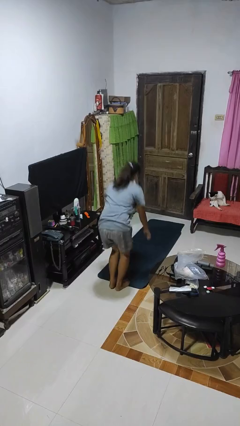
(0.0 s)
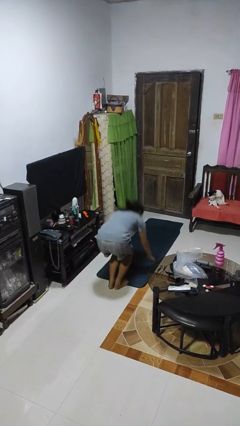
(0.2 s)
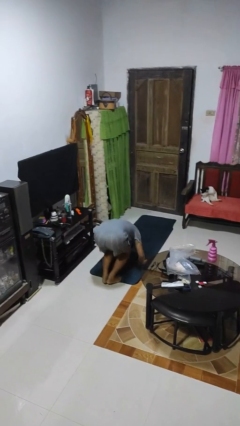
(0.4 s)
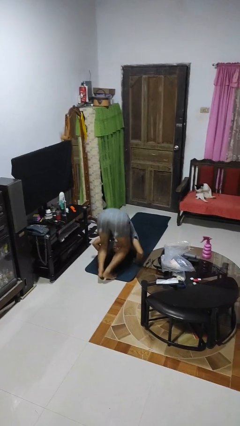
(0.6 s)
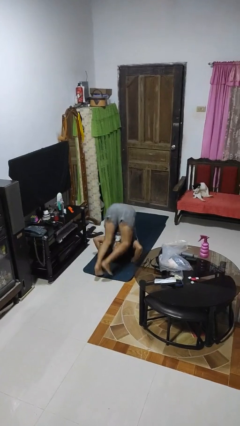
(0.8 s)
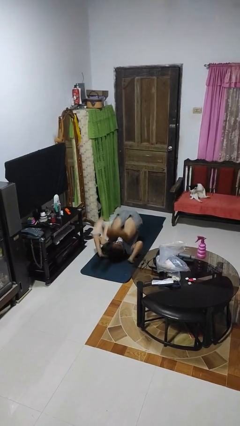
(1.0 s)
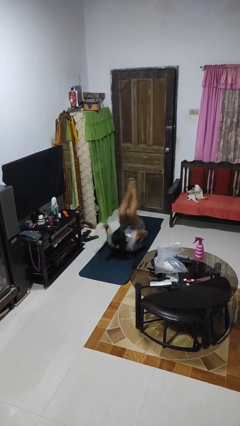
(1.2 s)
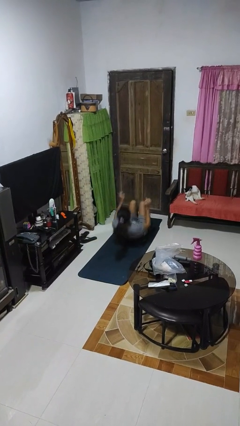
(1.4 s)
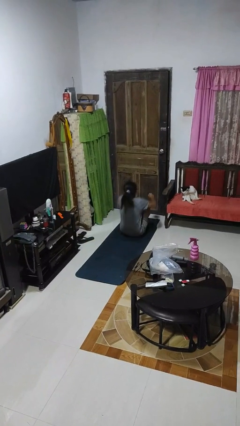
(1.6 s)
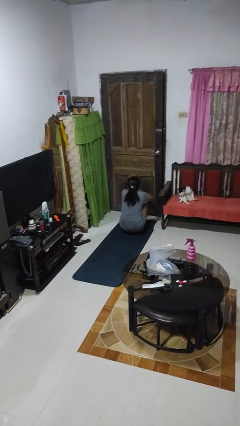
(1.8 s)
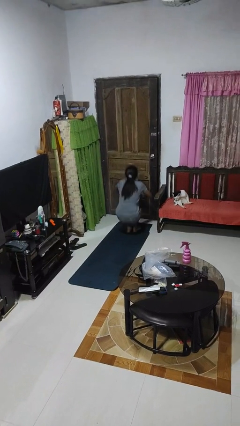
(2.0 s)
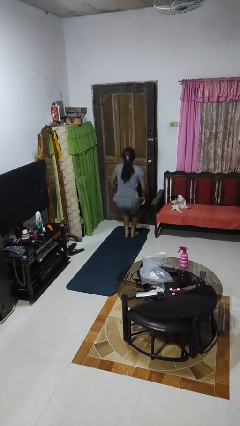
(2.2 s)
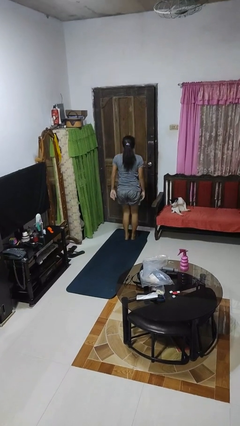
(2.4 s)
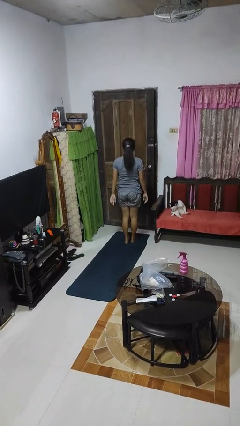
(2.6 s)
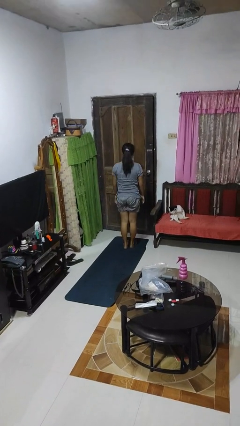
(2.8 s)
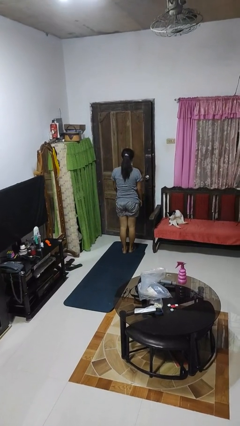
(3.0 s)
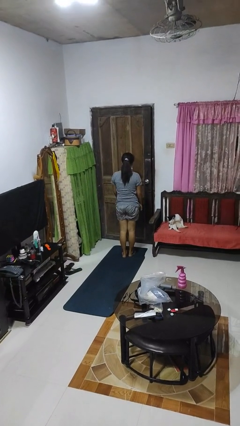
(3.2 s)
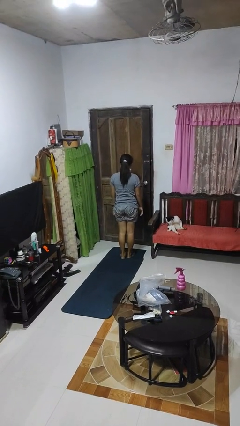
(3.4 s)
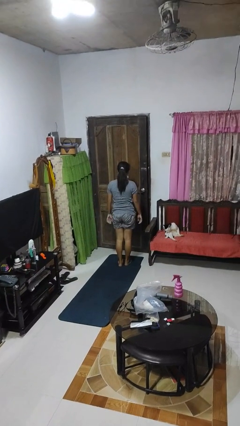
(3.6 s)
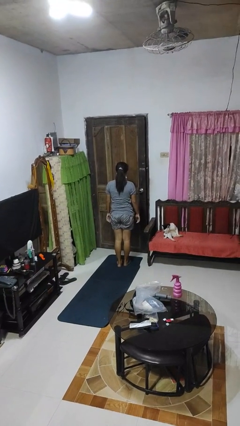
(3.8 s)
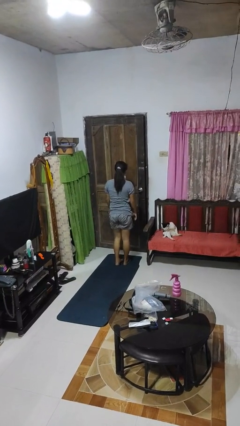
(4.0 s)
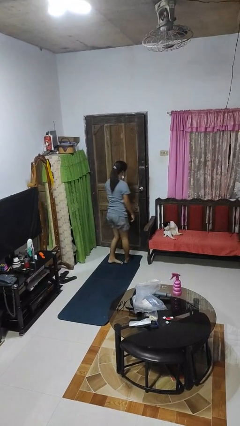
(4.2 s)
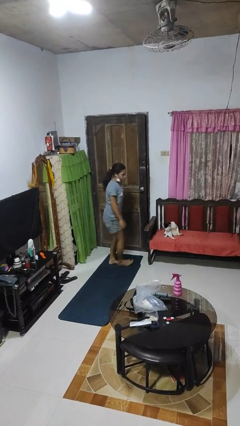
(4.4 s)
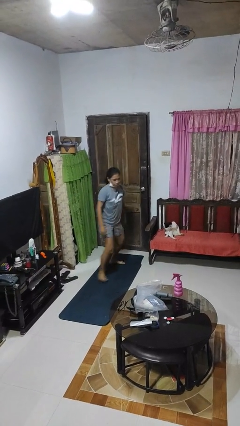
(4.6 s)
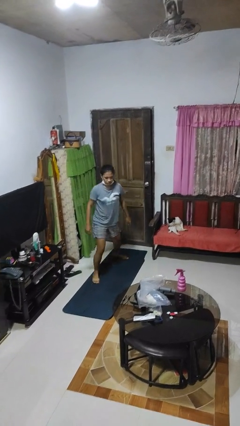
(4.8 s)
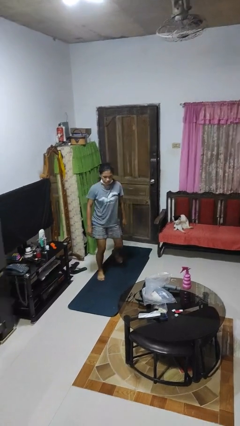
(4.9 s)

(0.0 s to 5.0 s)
person somersaults

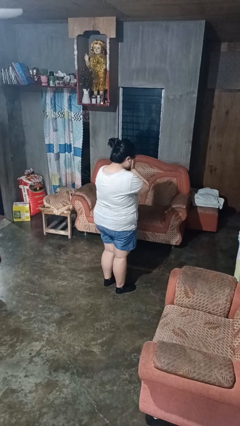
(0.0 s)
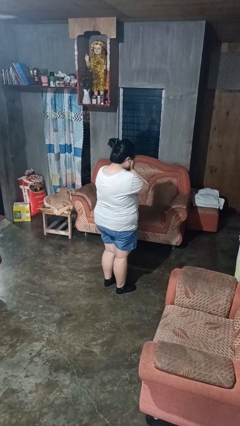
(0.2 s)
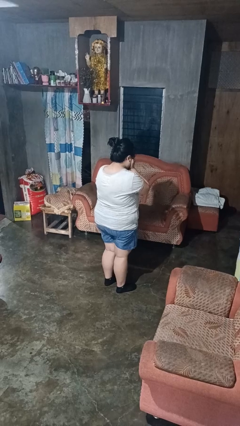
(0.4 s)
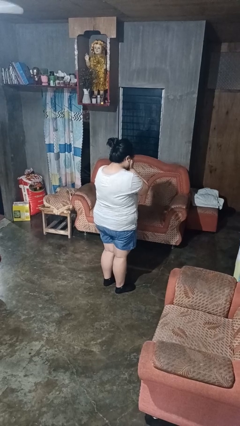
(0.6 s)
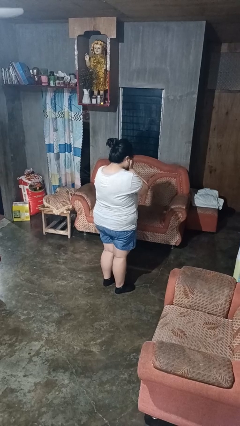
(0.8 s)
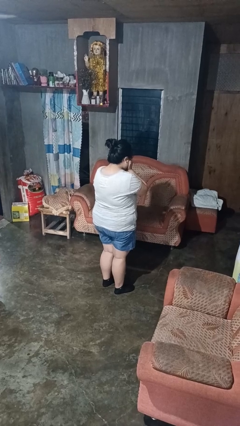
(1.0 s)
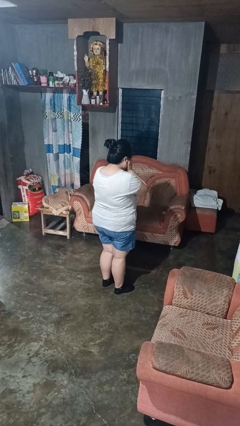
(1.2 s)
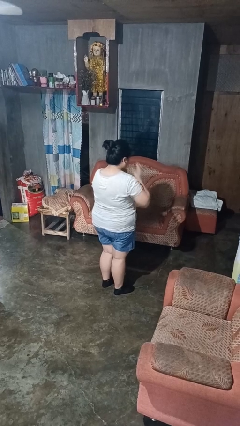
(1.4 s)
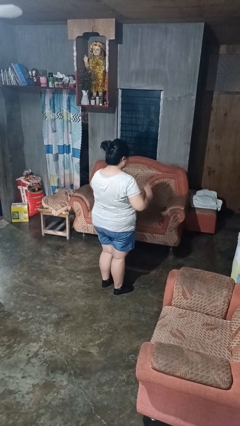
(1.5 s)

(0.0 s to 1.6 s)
person covers face with hands

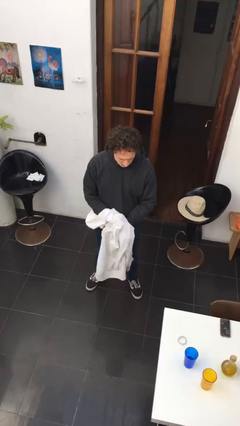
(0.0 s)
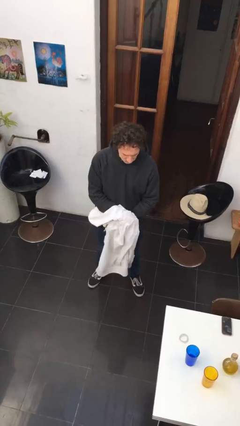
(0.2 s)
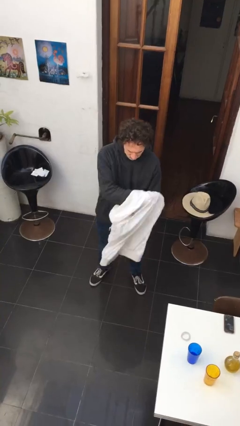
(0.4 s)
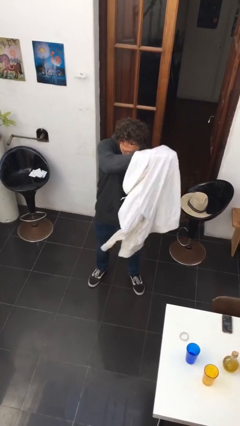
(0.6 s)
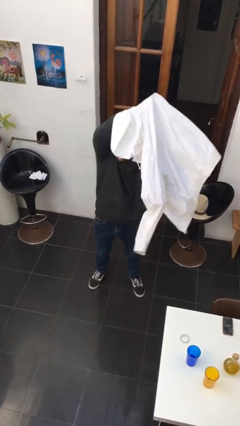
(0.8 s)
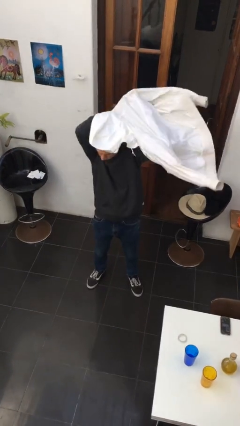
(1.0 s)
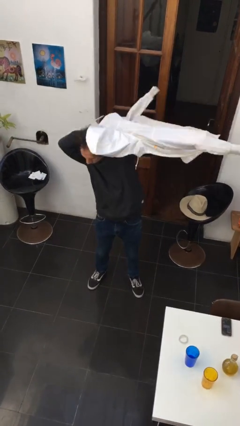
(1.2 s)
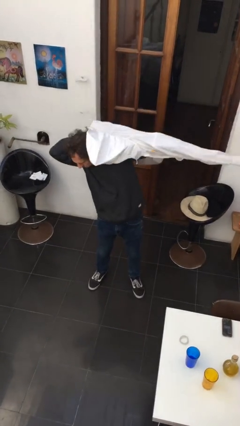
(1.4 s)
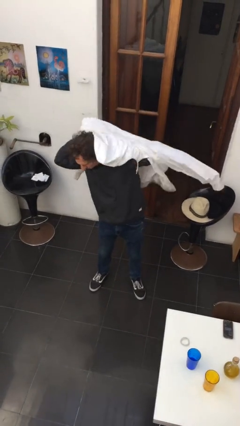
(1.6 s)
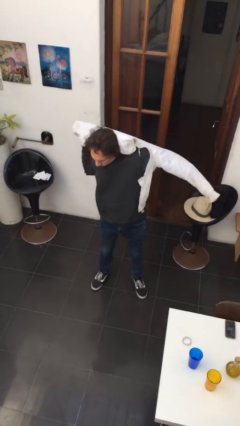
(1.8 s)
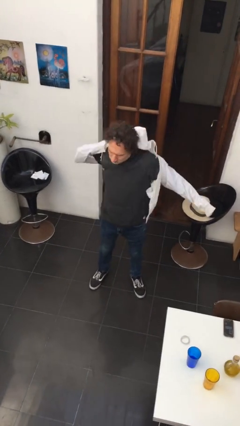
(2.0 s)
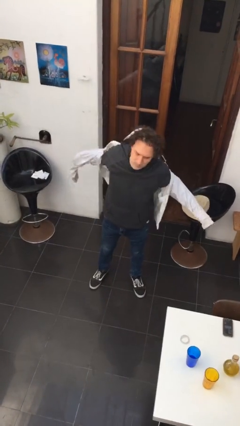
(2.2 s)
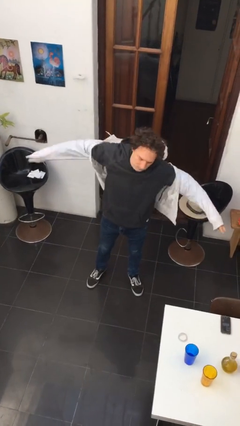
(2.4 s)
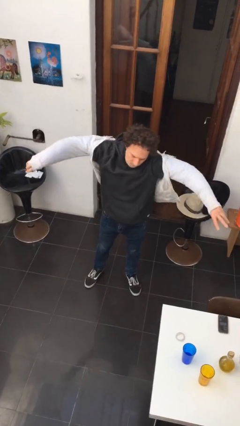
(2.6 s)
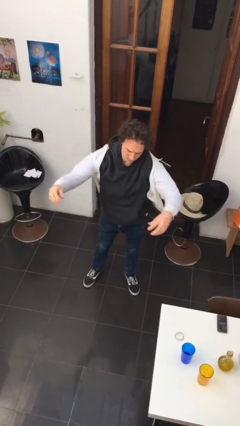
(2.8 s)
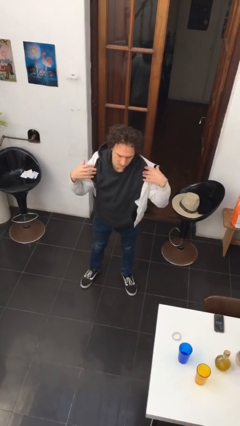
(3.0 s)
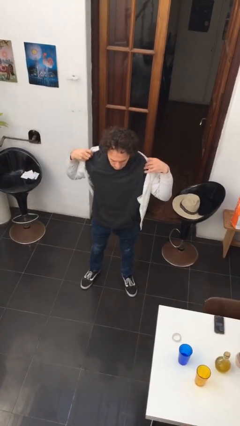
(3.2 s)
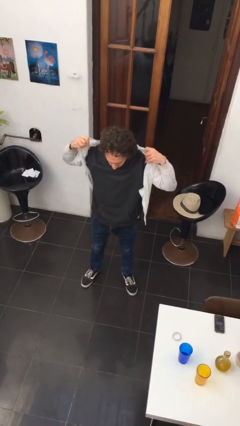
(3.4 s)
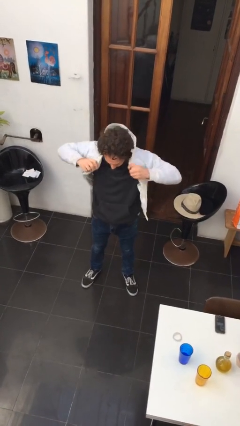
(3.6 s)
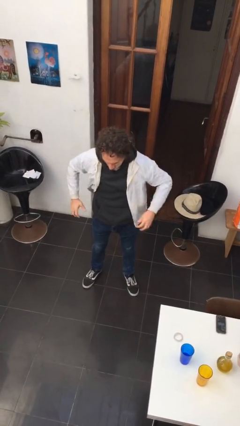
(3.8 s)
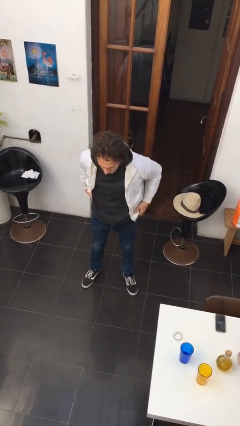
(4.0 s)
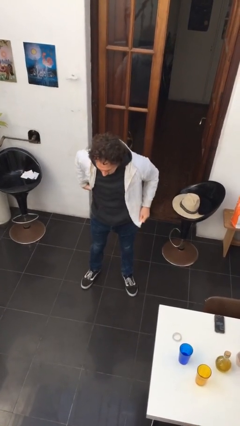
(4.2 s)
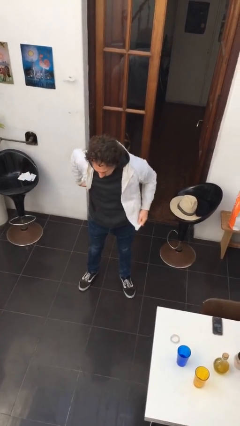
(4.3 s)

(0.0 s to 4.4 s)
person puts on jacket

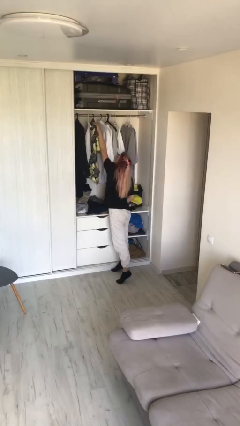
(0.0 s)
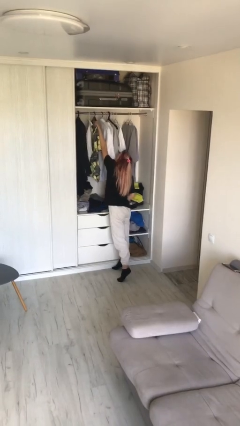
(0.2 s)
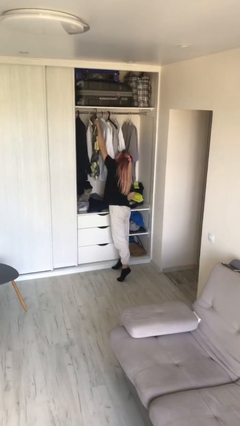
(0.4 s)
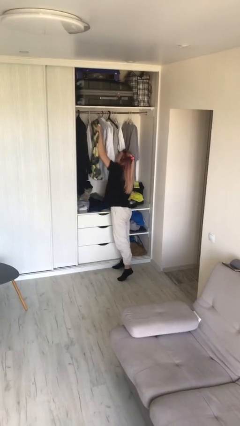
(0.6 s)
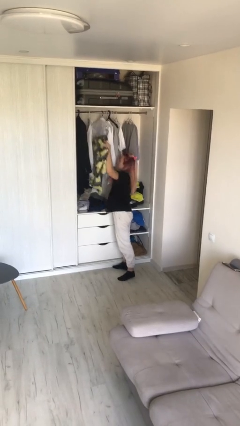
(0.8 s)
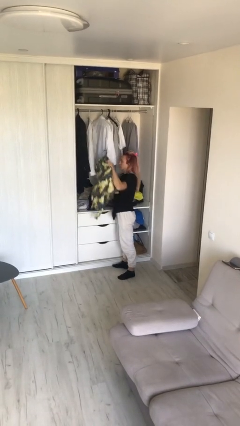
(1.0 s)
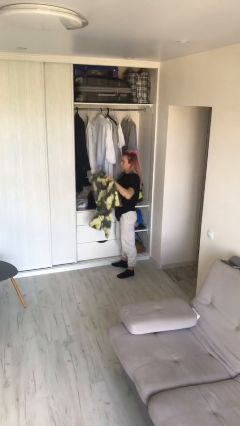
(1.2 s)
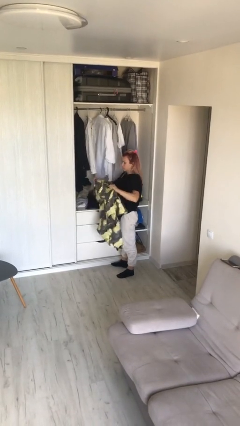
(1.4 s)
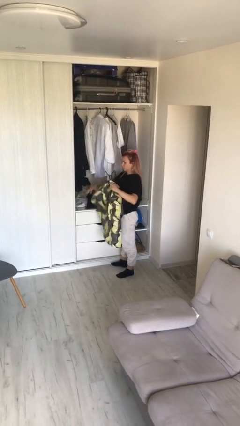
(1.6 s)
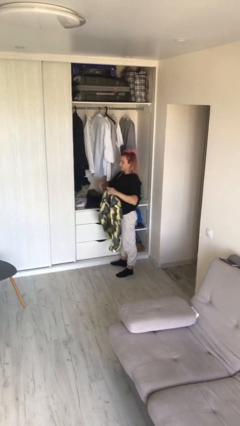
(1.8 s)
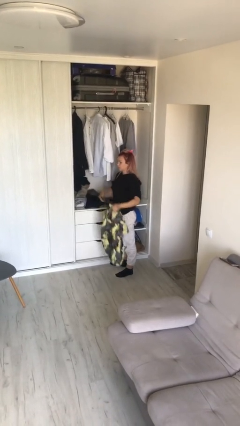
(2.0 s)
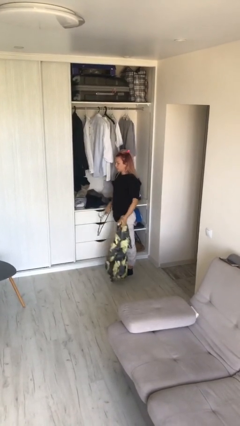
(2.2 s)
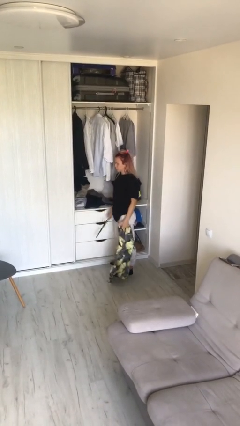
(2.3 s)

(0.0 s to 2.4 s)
person takes clothes from closet

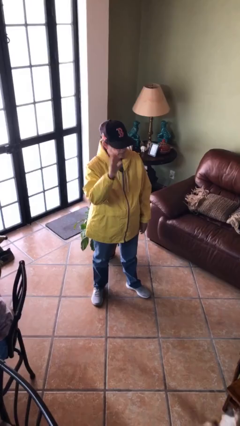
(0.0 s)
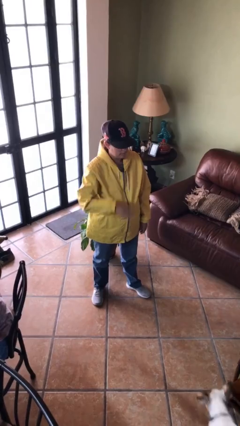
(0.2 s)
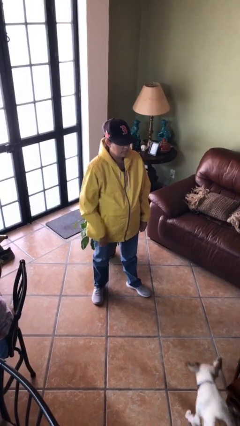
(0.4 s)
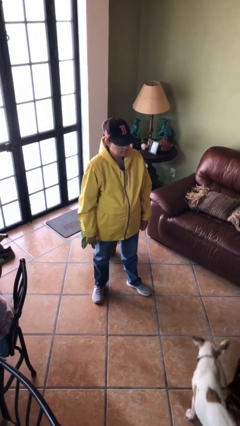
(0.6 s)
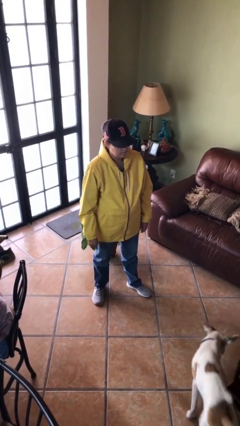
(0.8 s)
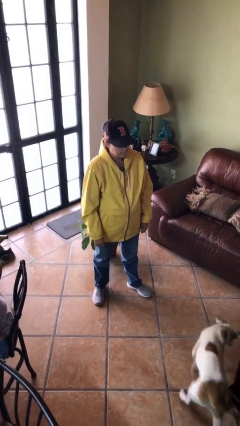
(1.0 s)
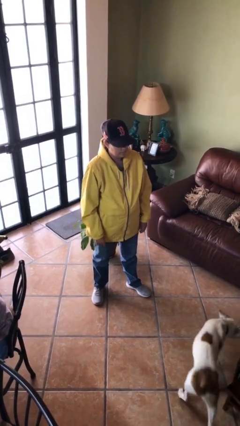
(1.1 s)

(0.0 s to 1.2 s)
person gestures lower hand

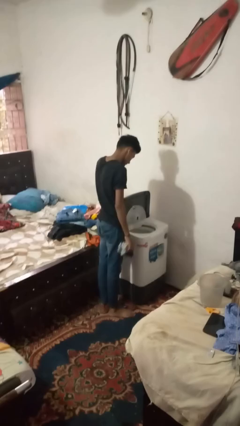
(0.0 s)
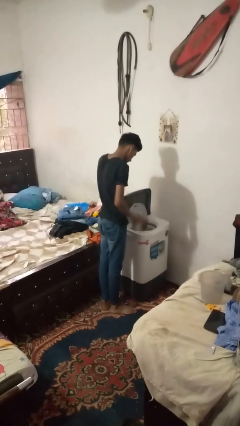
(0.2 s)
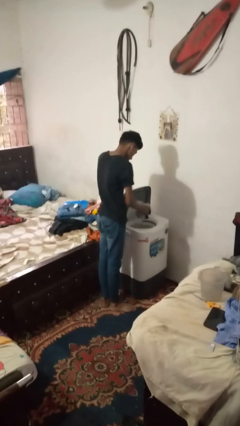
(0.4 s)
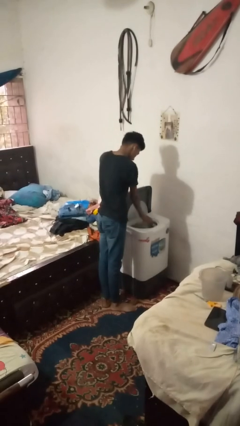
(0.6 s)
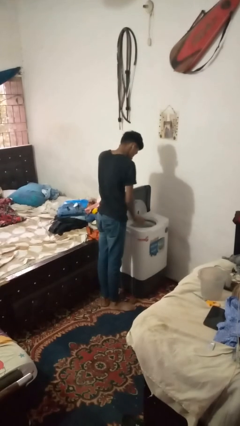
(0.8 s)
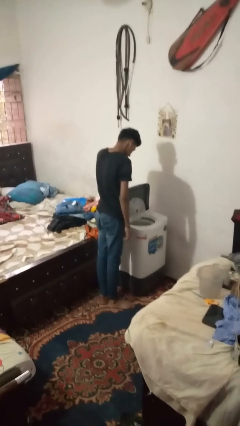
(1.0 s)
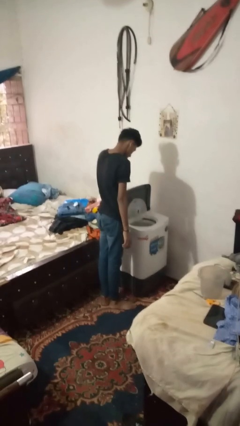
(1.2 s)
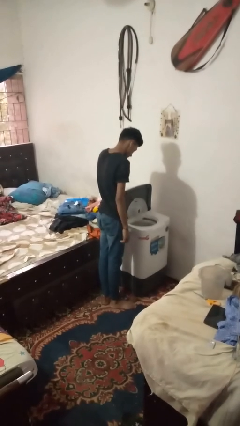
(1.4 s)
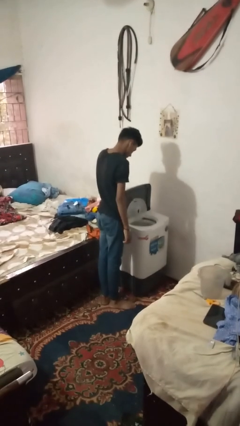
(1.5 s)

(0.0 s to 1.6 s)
person loads dryer

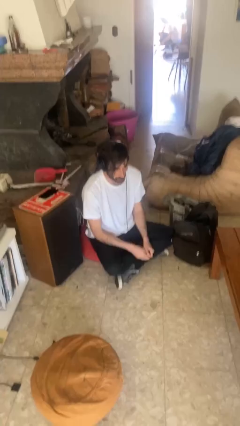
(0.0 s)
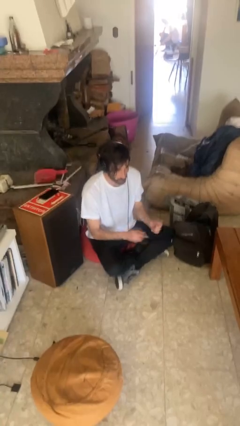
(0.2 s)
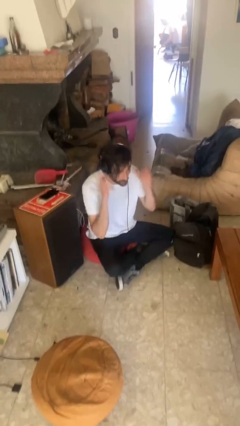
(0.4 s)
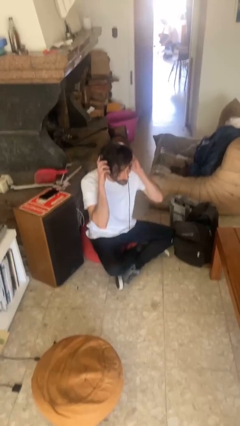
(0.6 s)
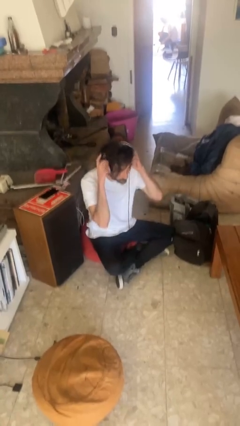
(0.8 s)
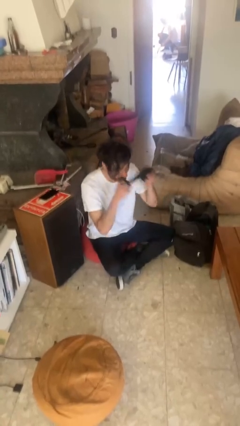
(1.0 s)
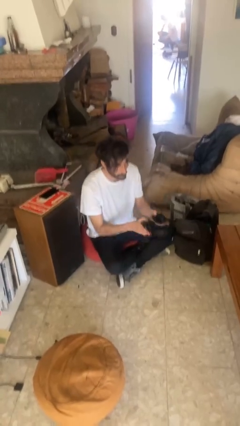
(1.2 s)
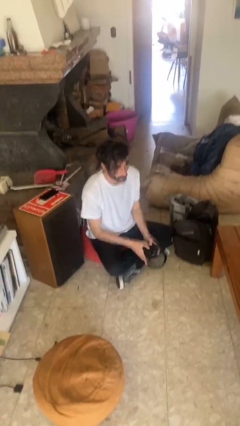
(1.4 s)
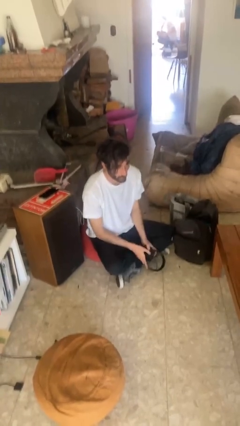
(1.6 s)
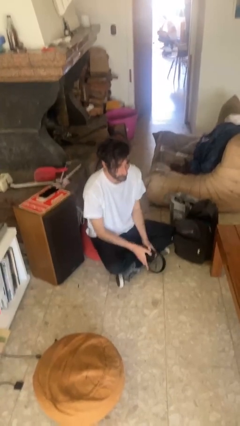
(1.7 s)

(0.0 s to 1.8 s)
person takes off headphones
